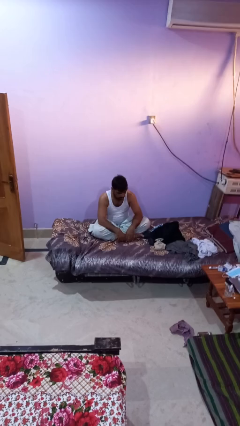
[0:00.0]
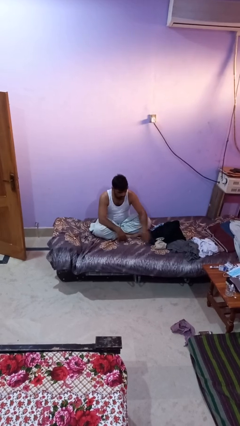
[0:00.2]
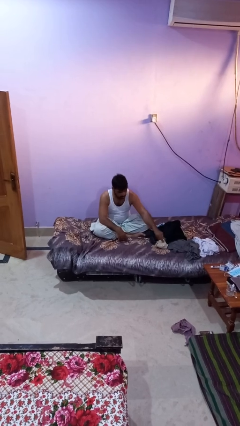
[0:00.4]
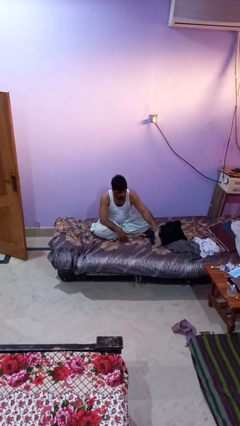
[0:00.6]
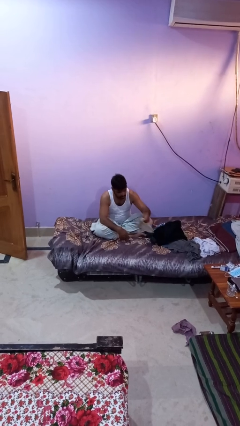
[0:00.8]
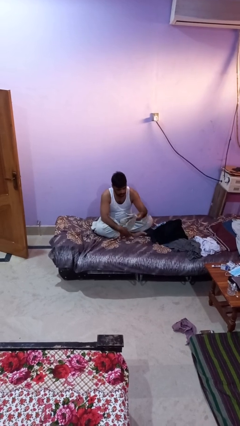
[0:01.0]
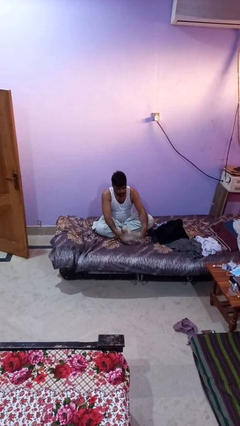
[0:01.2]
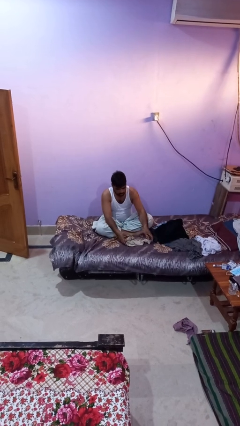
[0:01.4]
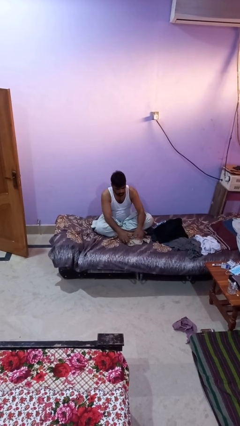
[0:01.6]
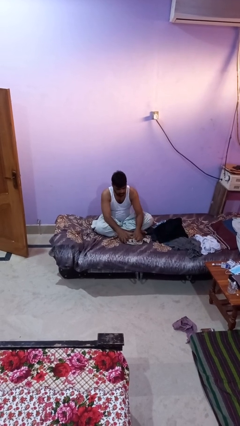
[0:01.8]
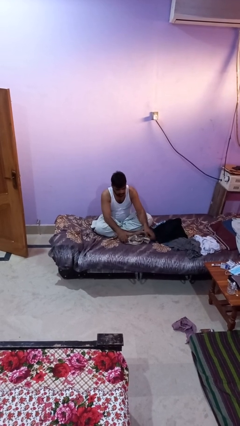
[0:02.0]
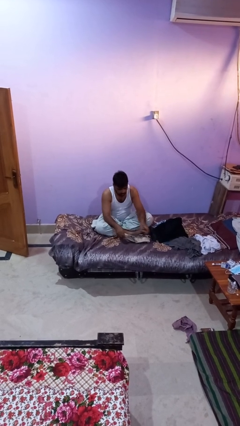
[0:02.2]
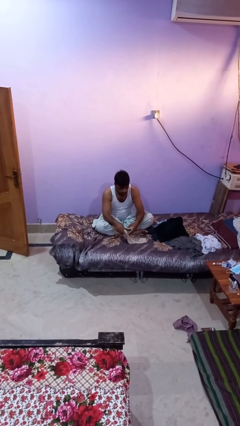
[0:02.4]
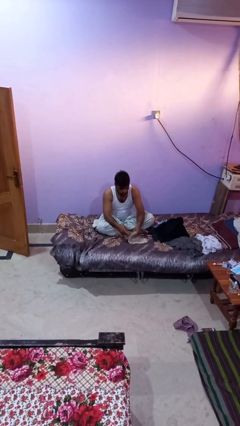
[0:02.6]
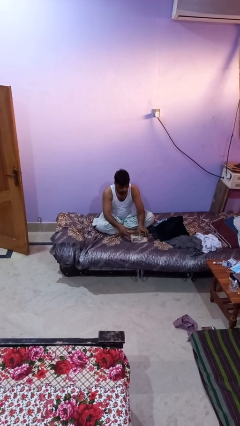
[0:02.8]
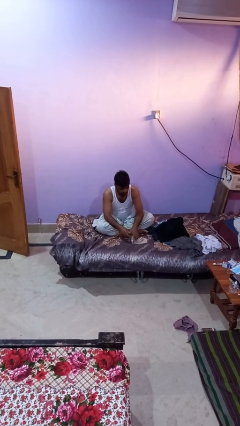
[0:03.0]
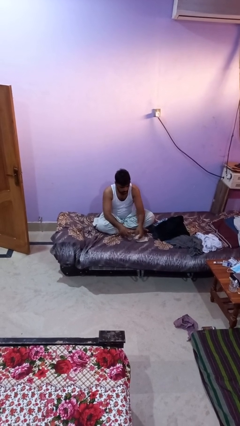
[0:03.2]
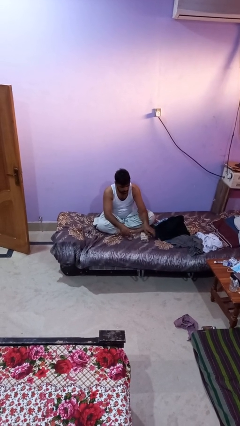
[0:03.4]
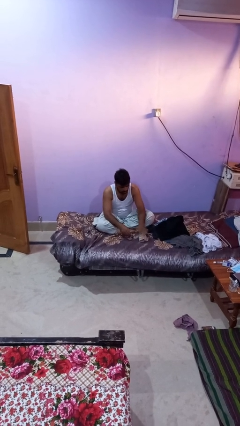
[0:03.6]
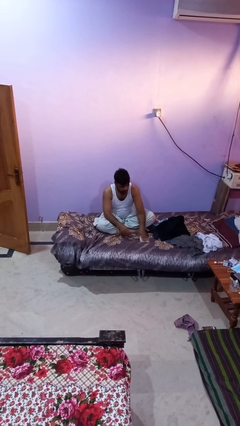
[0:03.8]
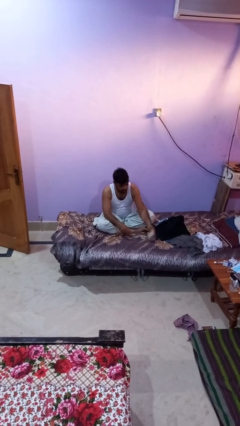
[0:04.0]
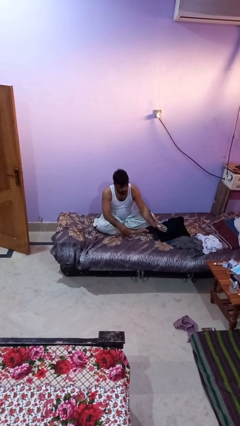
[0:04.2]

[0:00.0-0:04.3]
person folds socks

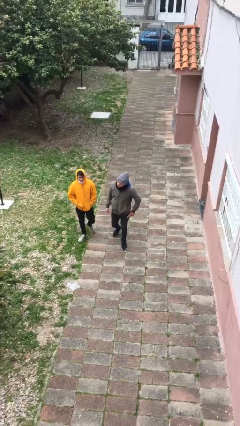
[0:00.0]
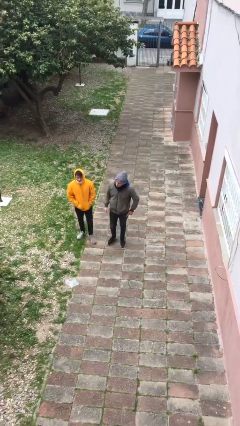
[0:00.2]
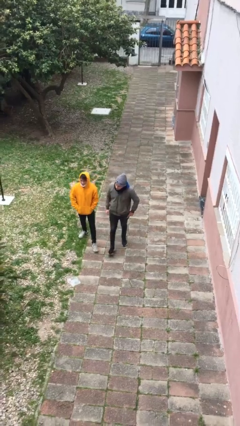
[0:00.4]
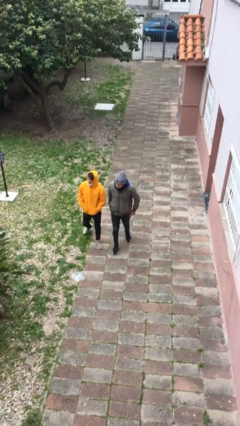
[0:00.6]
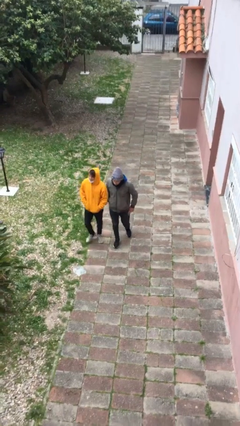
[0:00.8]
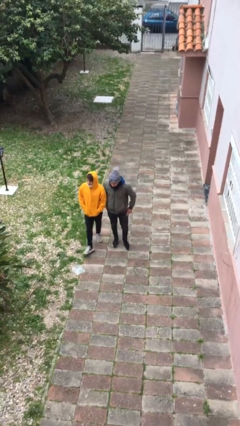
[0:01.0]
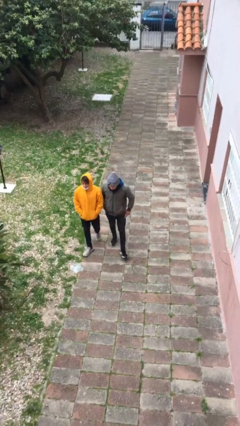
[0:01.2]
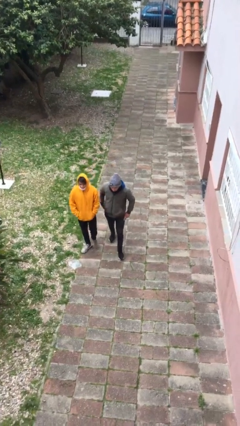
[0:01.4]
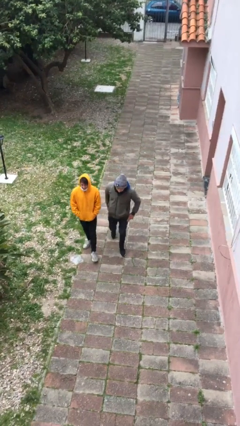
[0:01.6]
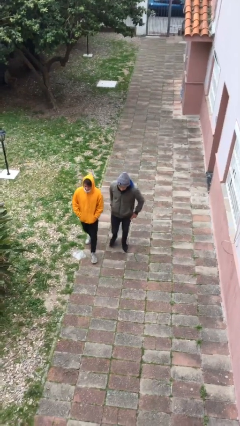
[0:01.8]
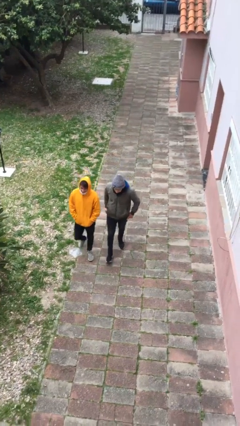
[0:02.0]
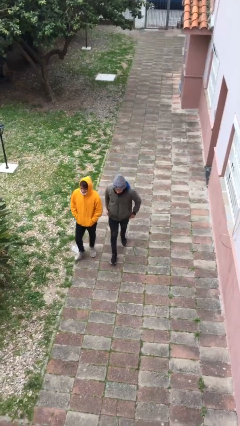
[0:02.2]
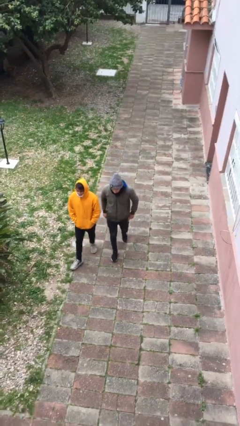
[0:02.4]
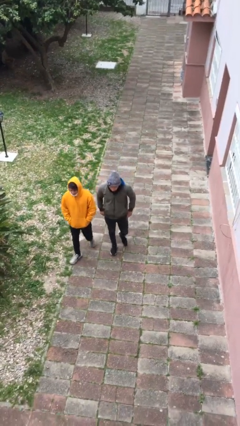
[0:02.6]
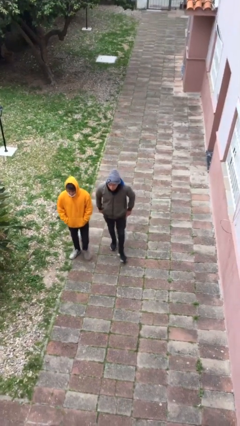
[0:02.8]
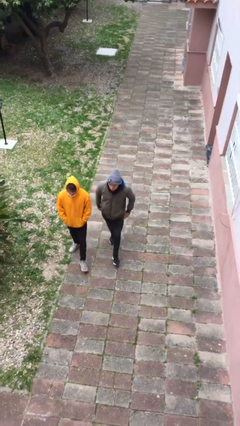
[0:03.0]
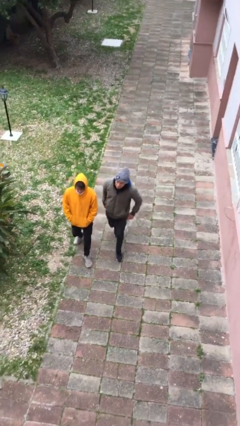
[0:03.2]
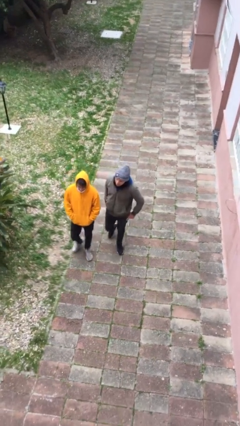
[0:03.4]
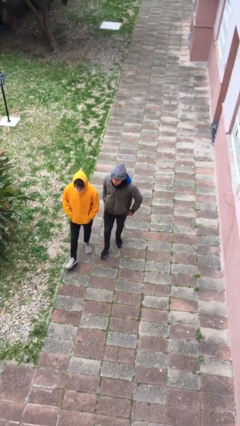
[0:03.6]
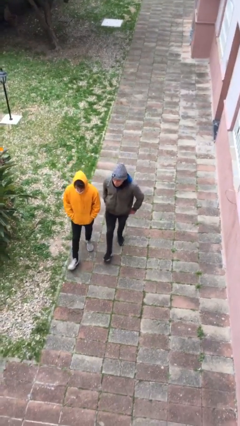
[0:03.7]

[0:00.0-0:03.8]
person talks to person

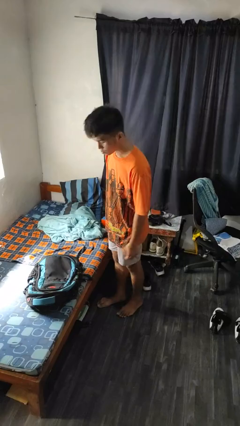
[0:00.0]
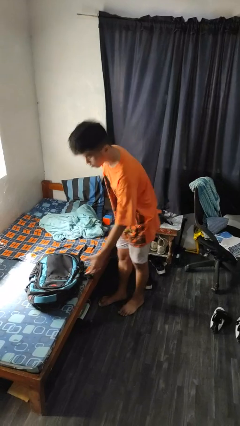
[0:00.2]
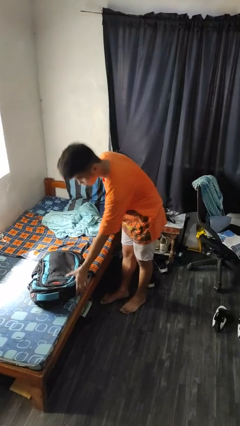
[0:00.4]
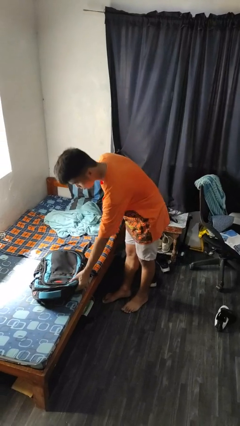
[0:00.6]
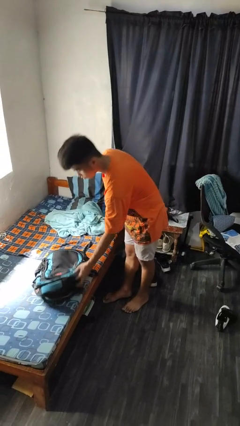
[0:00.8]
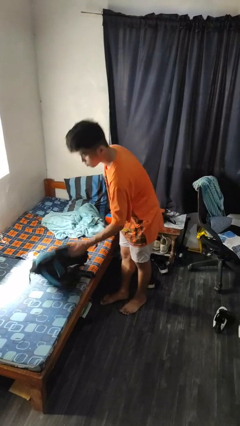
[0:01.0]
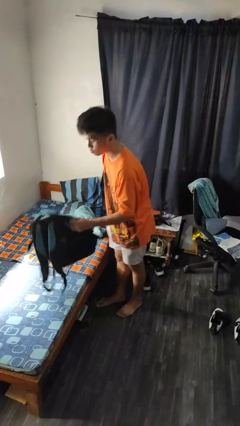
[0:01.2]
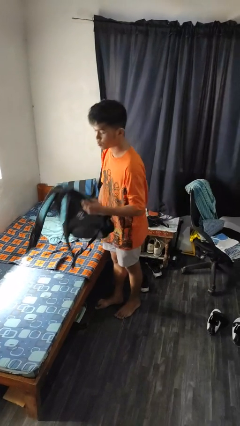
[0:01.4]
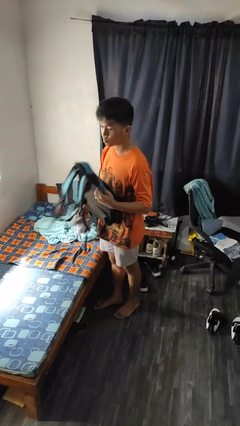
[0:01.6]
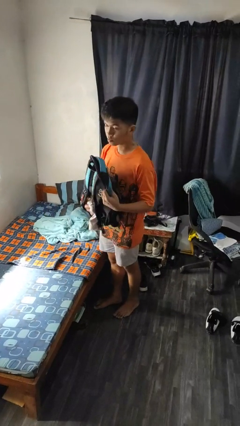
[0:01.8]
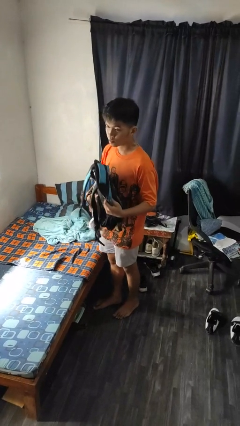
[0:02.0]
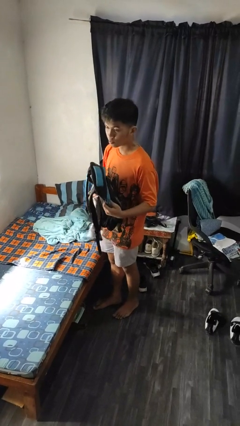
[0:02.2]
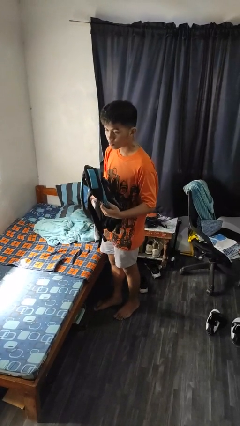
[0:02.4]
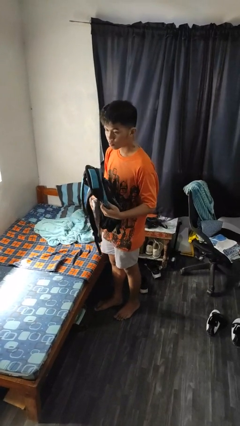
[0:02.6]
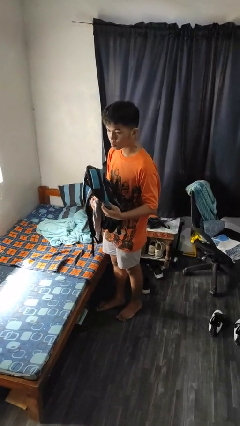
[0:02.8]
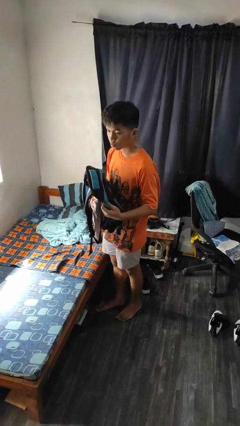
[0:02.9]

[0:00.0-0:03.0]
person picks up object from bed

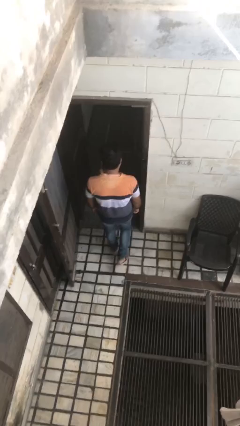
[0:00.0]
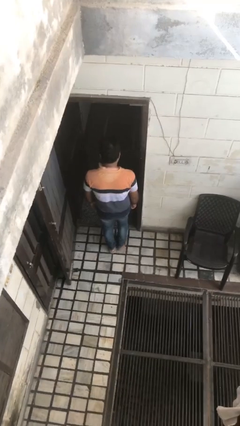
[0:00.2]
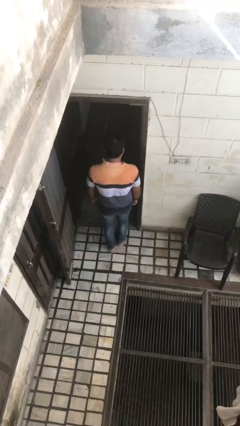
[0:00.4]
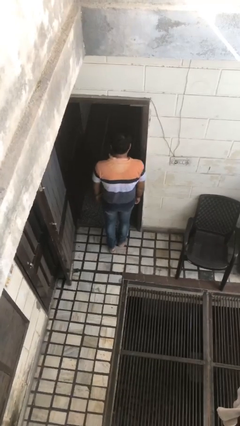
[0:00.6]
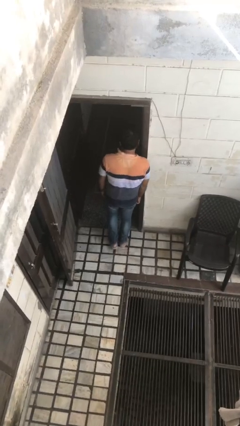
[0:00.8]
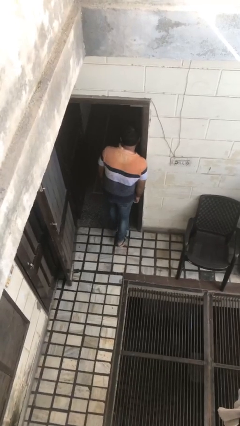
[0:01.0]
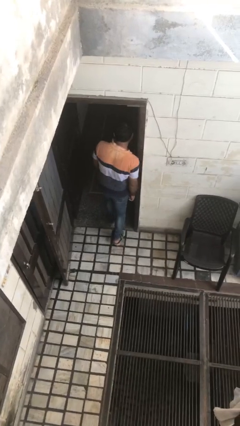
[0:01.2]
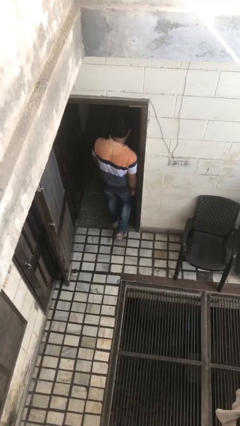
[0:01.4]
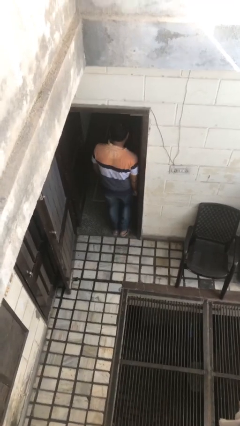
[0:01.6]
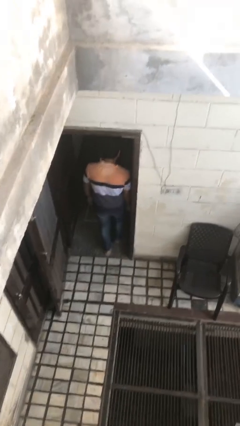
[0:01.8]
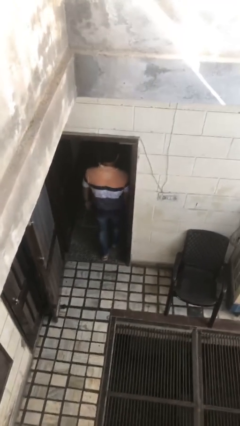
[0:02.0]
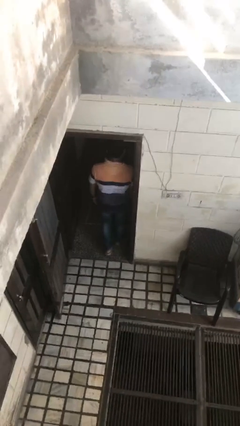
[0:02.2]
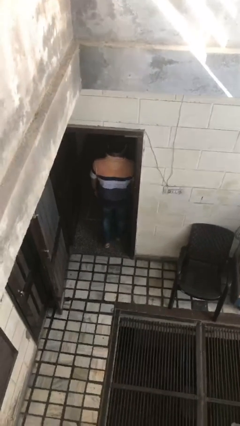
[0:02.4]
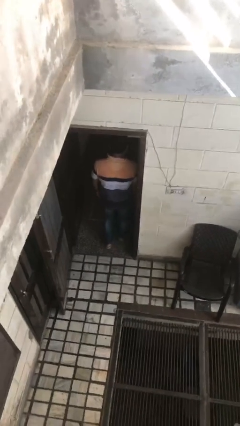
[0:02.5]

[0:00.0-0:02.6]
person bumps into wall

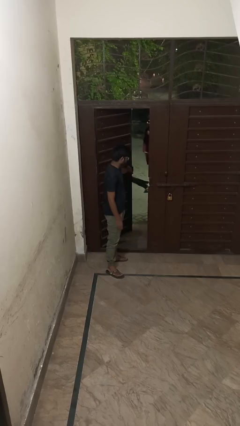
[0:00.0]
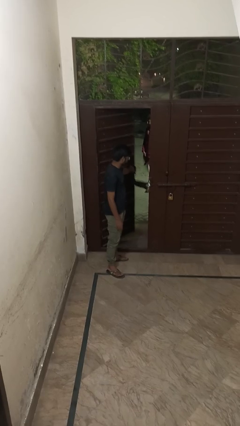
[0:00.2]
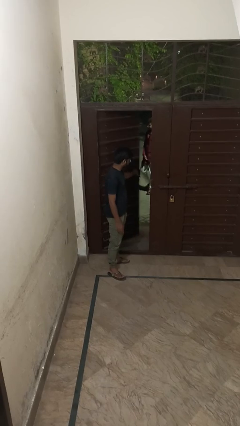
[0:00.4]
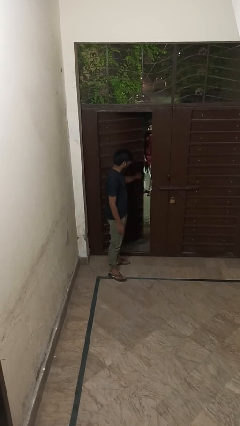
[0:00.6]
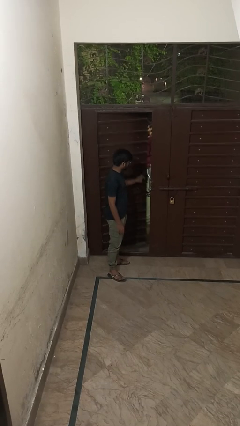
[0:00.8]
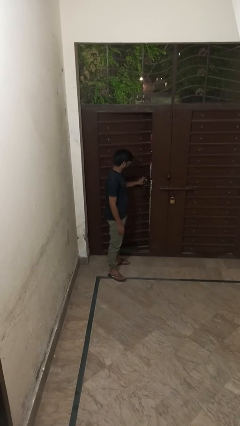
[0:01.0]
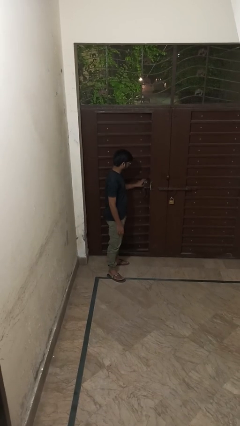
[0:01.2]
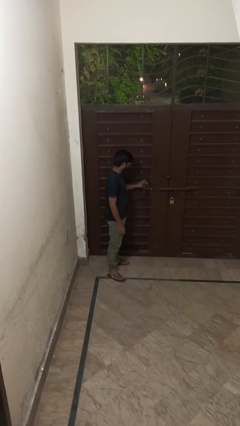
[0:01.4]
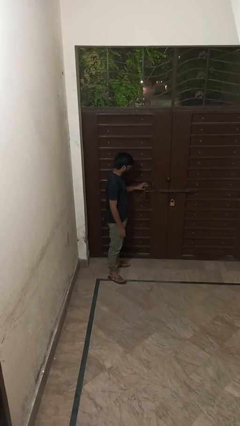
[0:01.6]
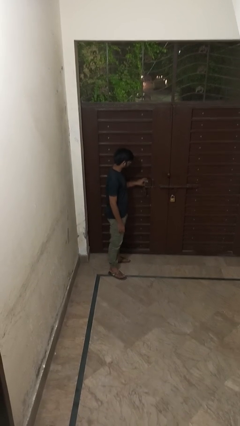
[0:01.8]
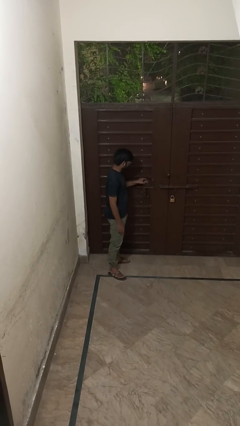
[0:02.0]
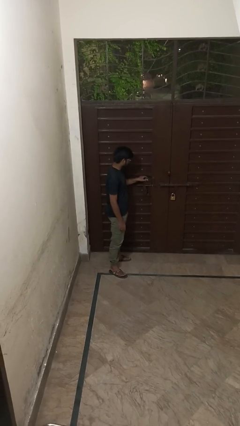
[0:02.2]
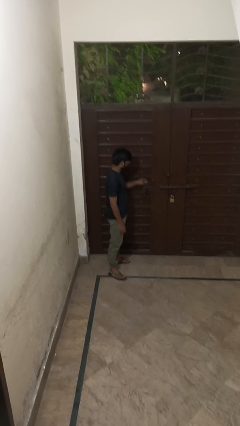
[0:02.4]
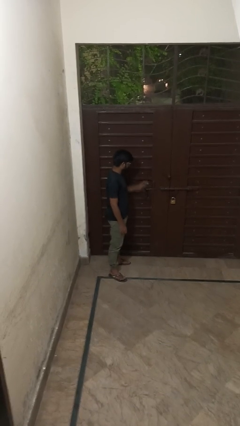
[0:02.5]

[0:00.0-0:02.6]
person closes facility door

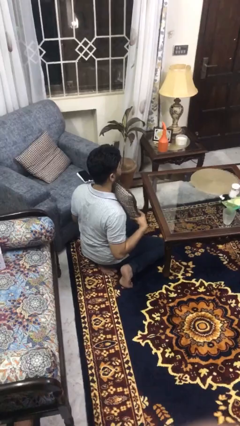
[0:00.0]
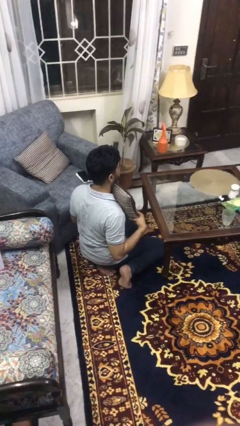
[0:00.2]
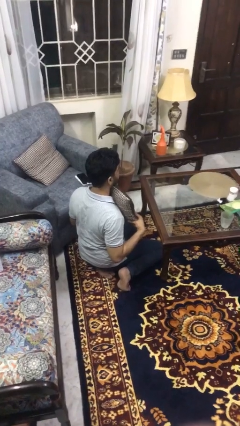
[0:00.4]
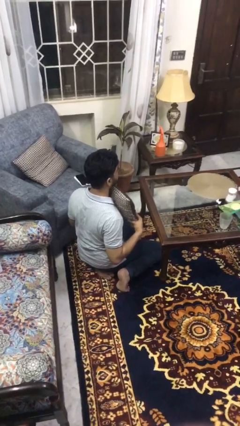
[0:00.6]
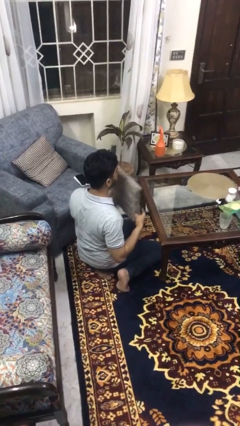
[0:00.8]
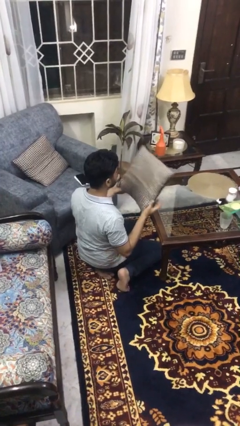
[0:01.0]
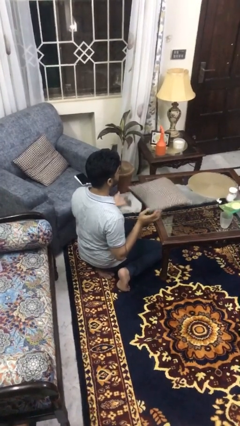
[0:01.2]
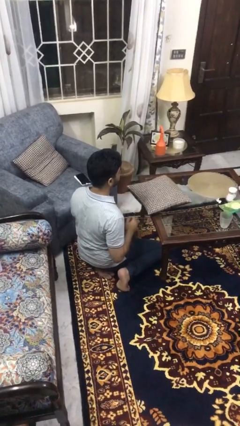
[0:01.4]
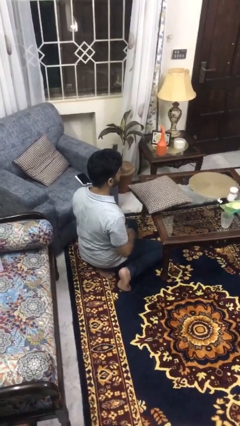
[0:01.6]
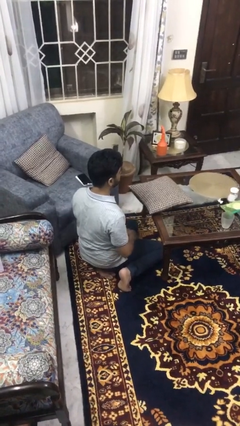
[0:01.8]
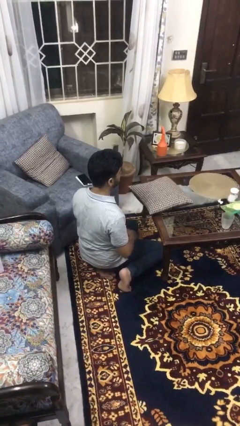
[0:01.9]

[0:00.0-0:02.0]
person throws object on table
